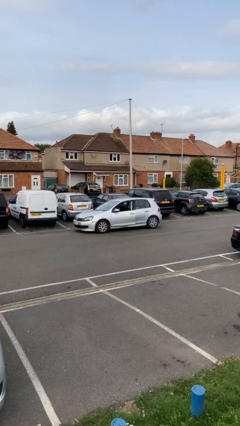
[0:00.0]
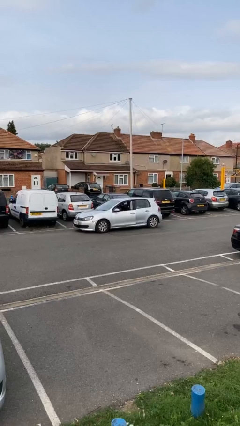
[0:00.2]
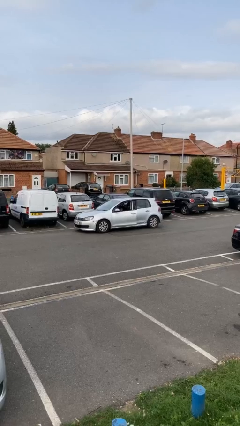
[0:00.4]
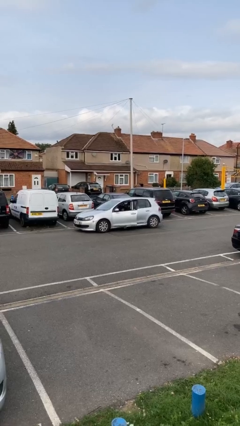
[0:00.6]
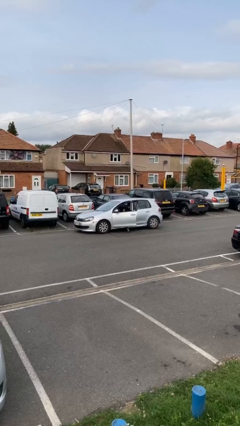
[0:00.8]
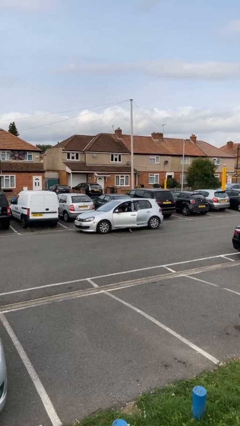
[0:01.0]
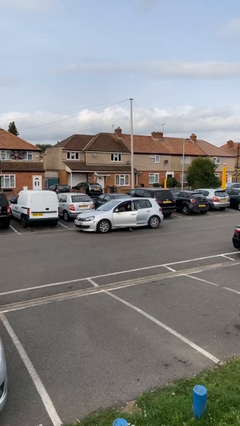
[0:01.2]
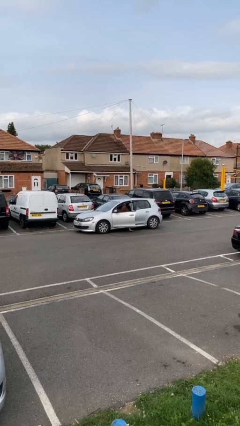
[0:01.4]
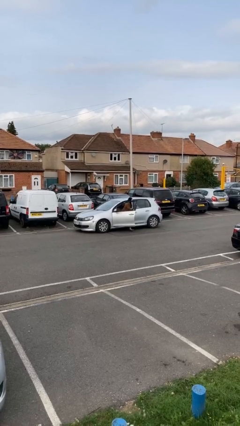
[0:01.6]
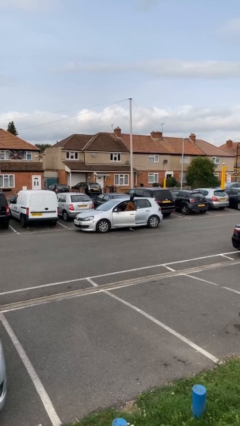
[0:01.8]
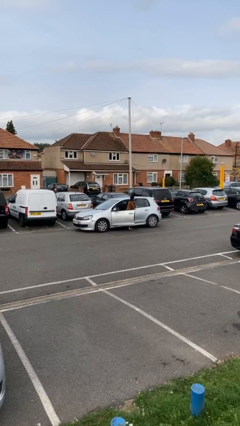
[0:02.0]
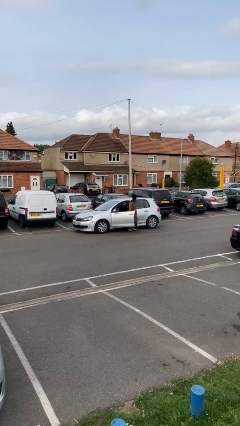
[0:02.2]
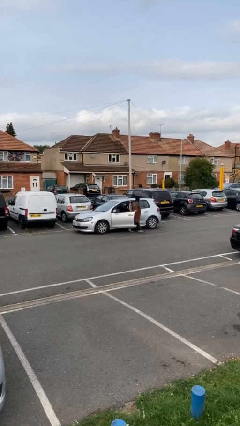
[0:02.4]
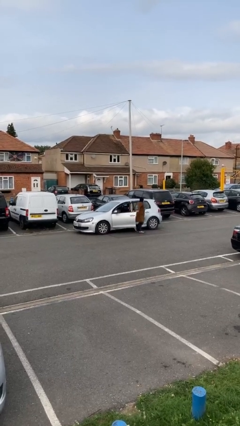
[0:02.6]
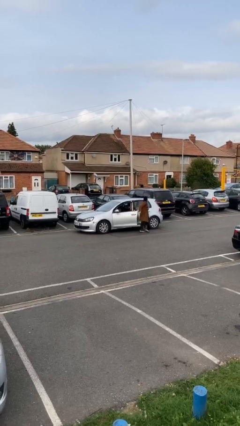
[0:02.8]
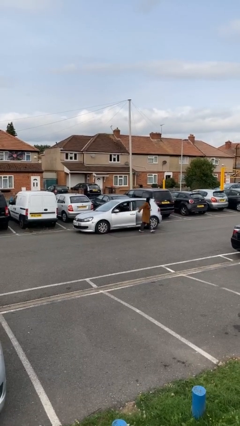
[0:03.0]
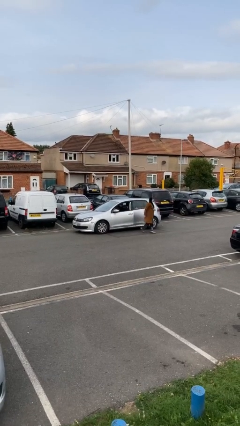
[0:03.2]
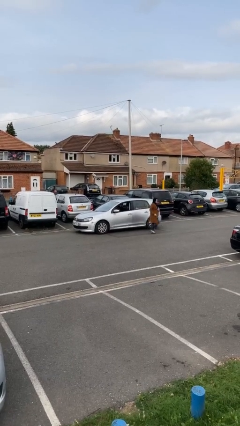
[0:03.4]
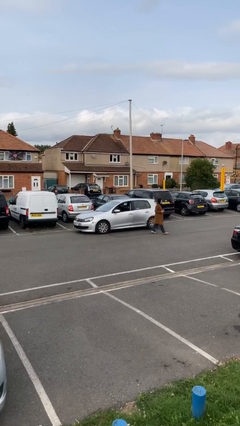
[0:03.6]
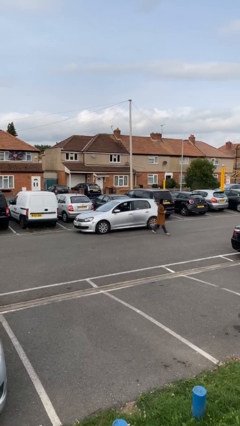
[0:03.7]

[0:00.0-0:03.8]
car drops off person

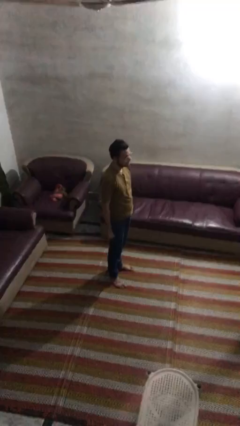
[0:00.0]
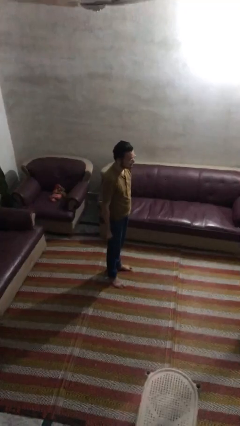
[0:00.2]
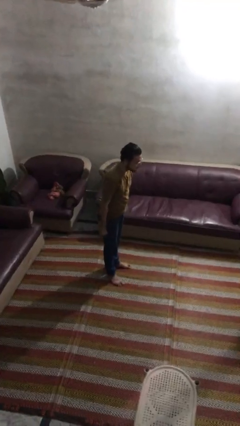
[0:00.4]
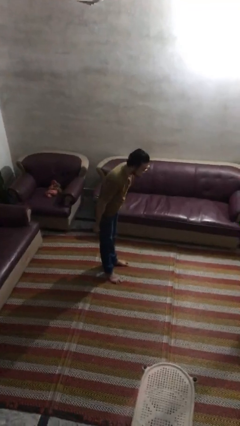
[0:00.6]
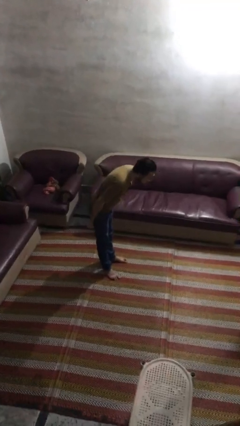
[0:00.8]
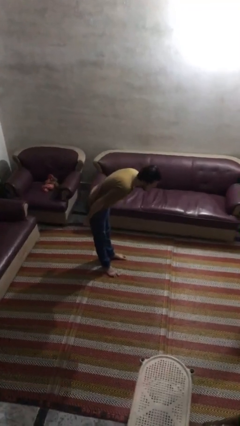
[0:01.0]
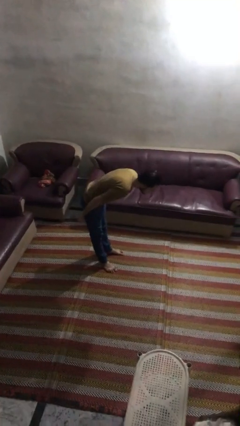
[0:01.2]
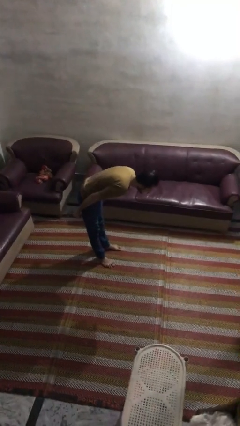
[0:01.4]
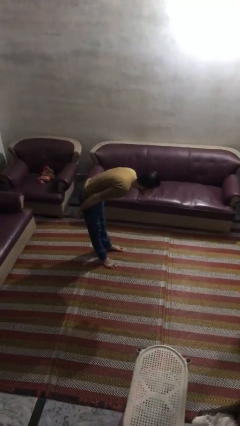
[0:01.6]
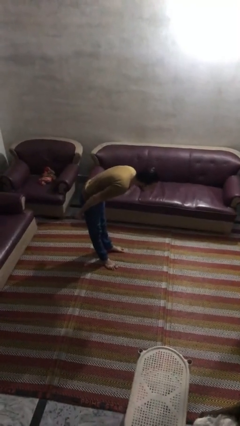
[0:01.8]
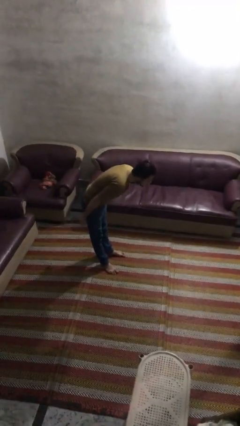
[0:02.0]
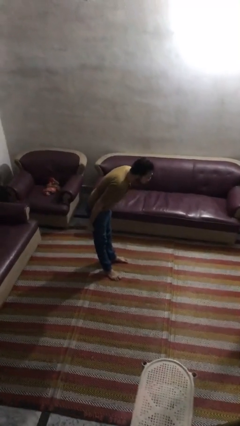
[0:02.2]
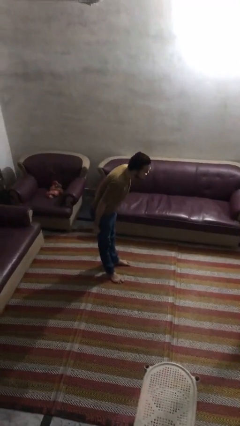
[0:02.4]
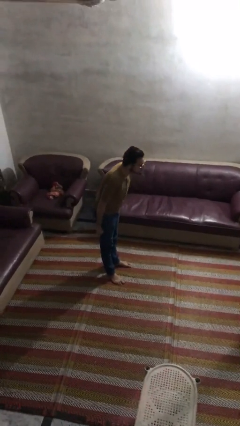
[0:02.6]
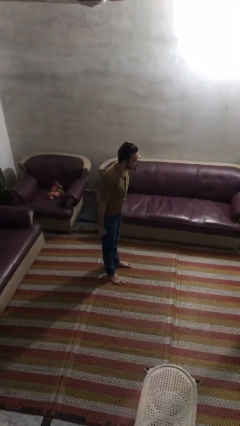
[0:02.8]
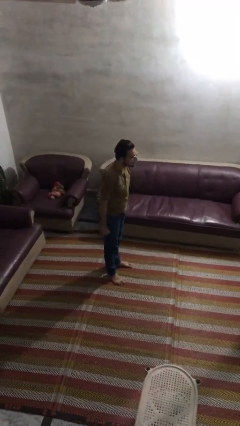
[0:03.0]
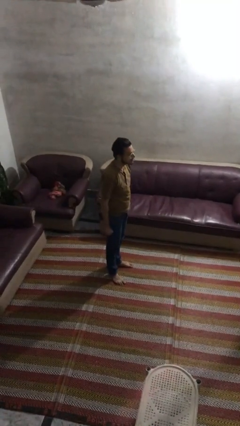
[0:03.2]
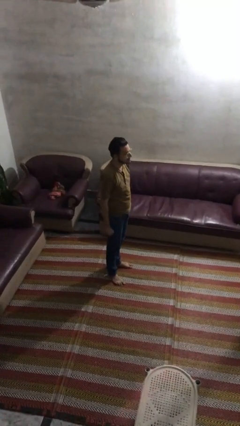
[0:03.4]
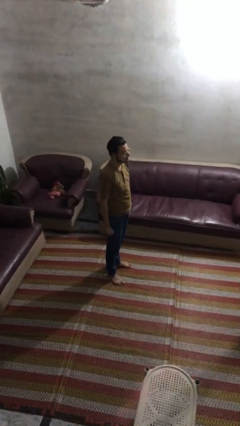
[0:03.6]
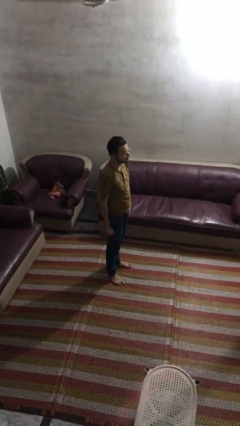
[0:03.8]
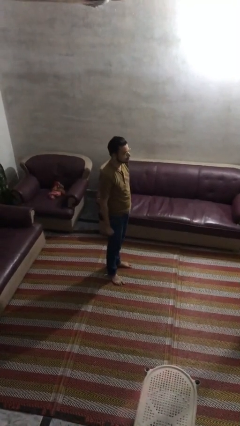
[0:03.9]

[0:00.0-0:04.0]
person bows

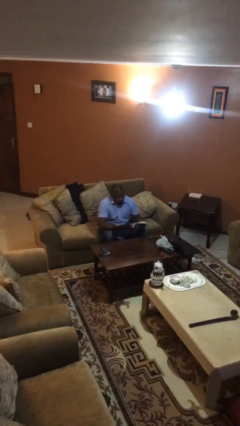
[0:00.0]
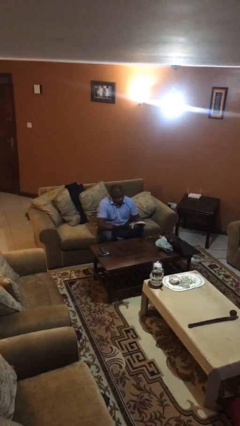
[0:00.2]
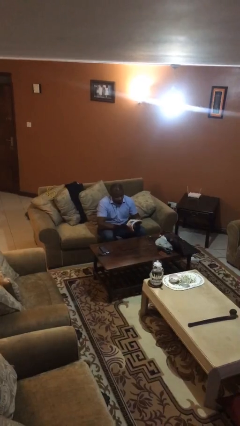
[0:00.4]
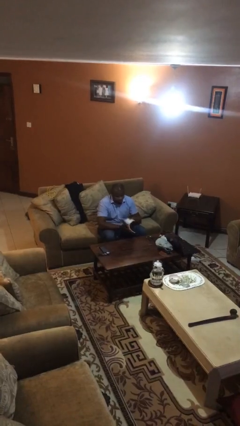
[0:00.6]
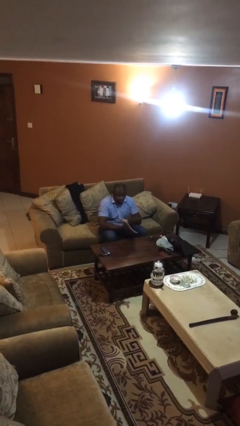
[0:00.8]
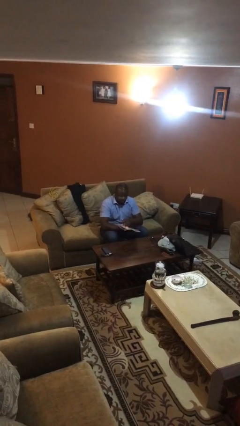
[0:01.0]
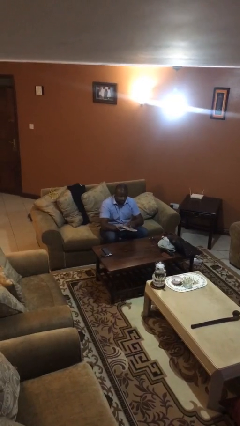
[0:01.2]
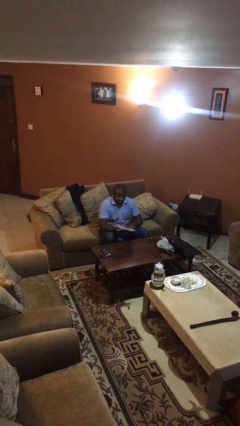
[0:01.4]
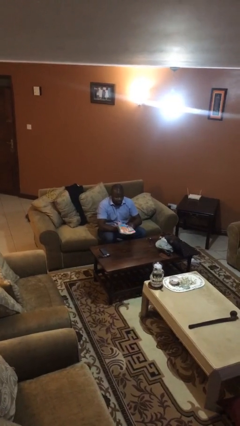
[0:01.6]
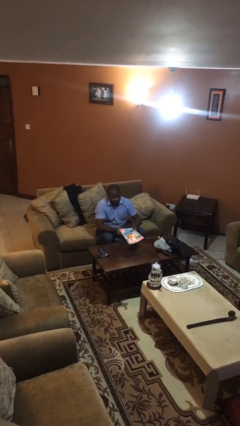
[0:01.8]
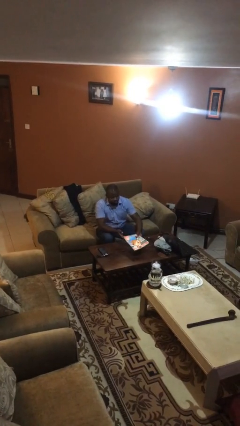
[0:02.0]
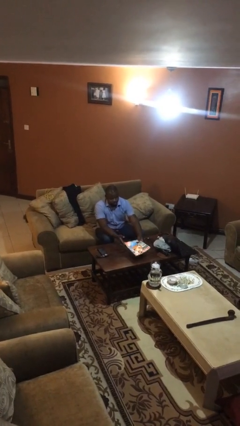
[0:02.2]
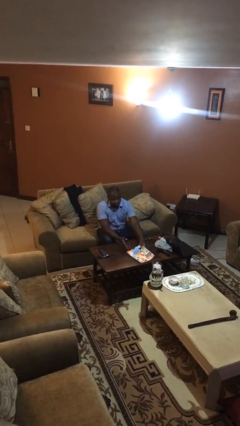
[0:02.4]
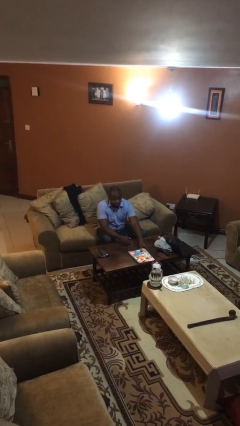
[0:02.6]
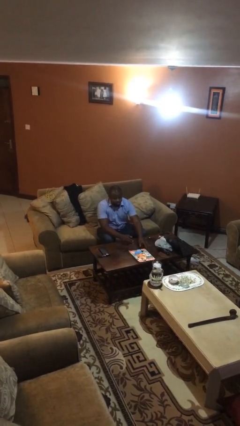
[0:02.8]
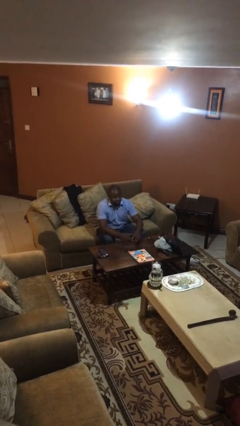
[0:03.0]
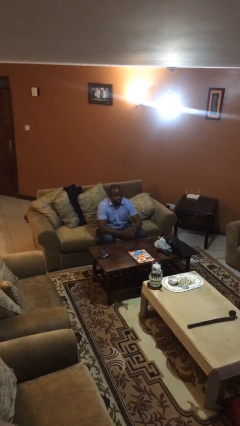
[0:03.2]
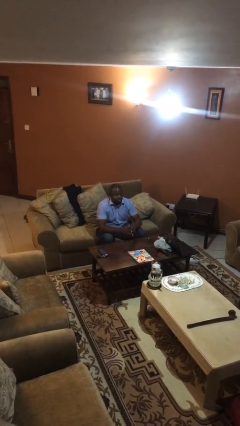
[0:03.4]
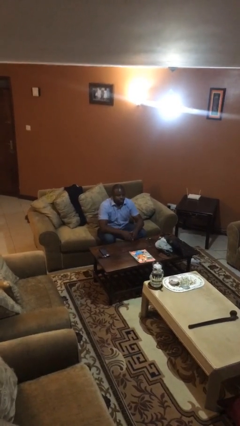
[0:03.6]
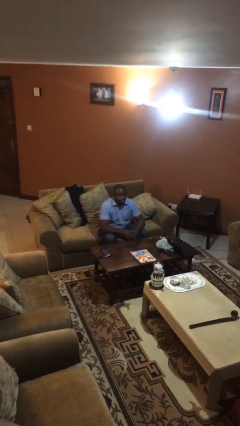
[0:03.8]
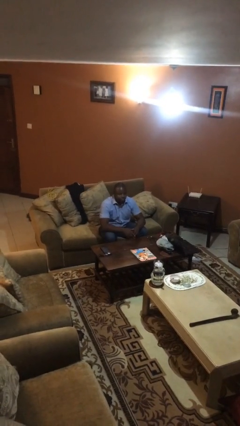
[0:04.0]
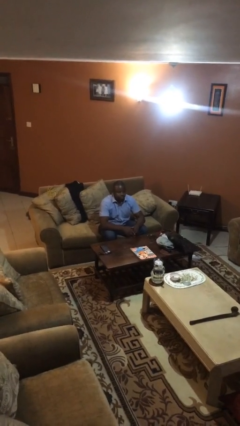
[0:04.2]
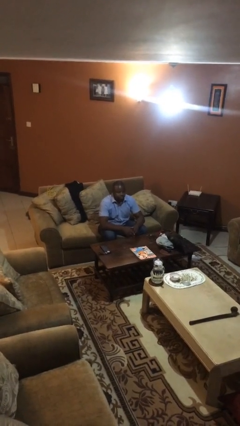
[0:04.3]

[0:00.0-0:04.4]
person puts down object on table

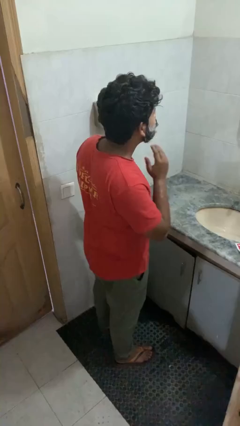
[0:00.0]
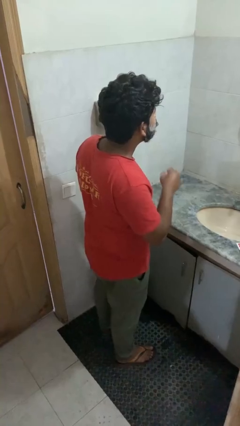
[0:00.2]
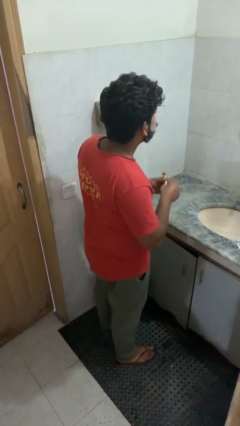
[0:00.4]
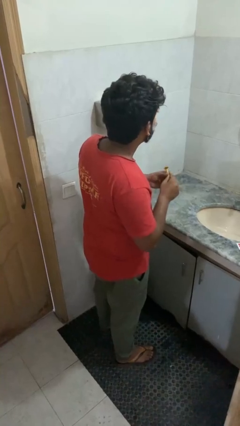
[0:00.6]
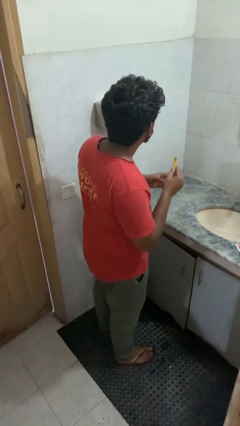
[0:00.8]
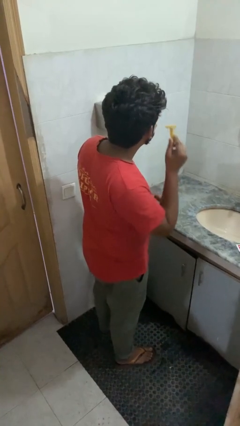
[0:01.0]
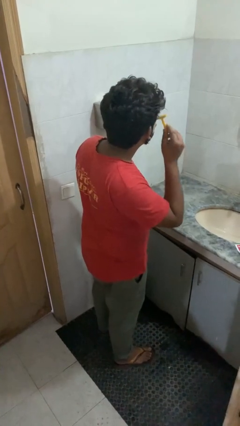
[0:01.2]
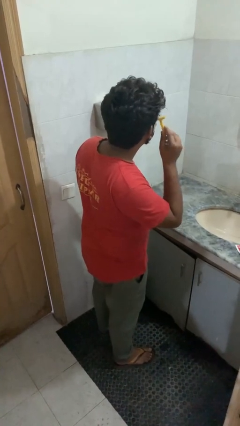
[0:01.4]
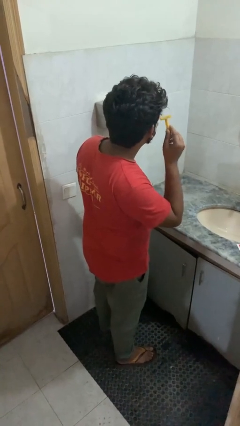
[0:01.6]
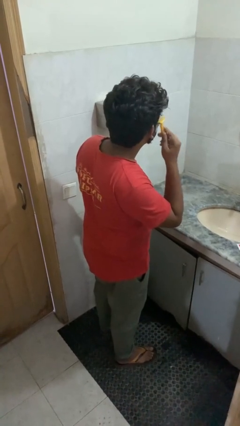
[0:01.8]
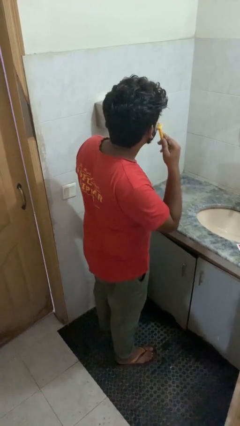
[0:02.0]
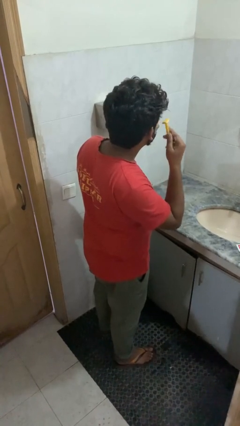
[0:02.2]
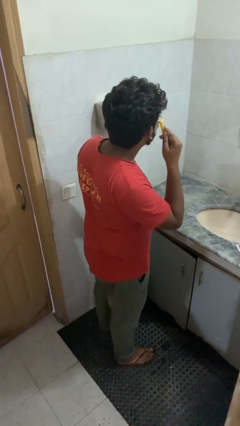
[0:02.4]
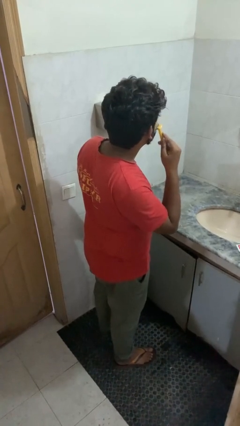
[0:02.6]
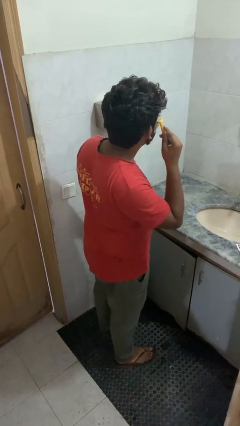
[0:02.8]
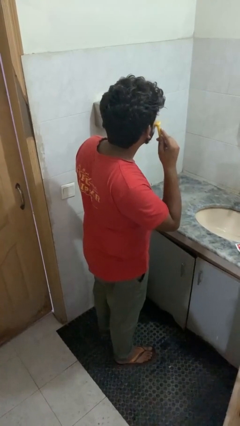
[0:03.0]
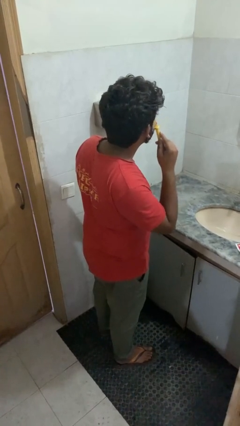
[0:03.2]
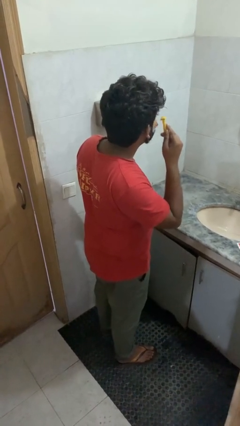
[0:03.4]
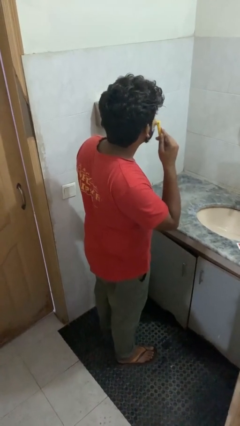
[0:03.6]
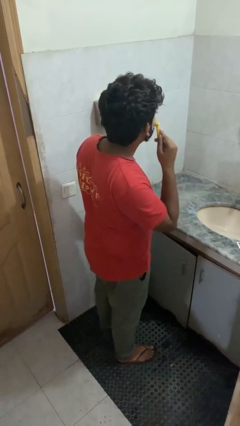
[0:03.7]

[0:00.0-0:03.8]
person shaves face

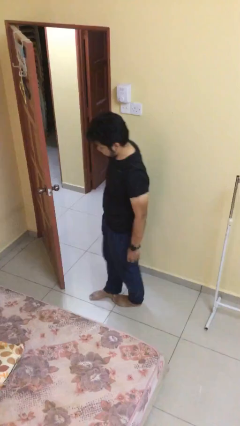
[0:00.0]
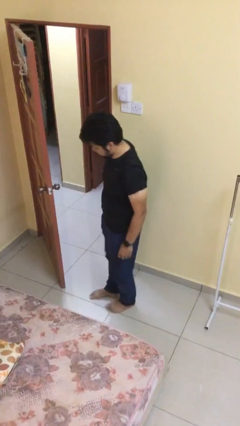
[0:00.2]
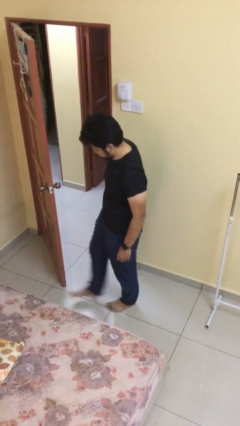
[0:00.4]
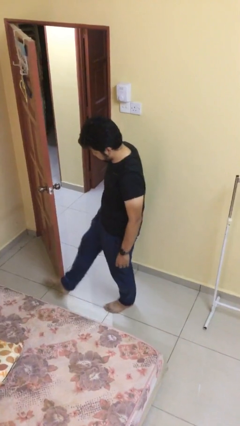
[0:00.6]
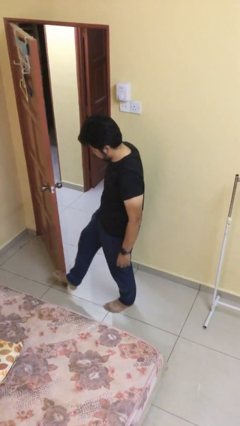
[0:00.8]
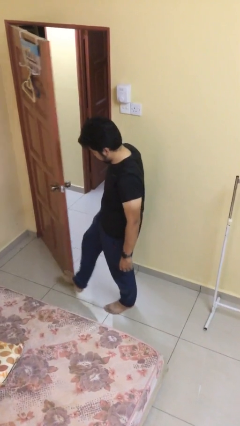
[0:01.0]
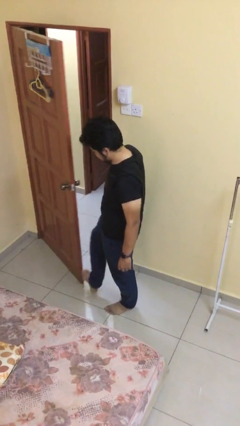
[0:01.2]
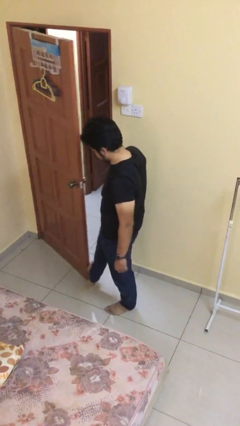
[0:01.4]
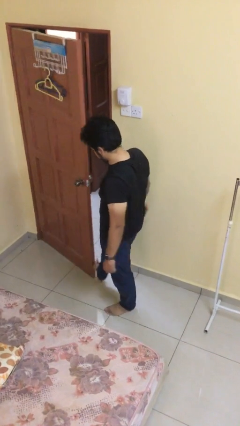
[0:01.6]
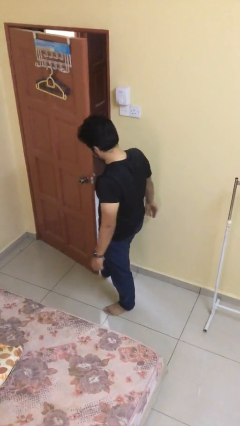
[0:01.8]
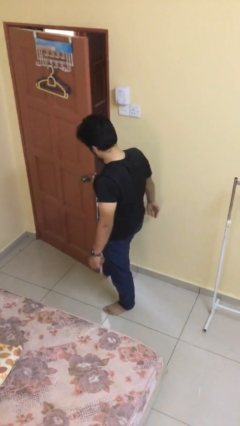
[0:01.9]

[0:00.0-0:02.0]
person closes door with foot
